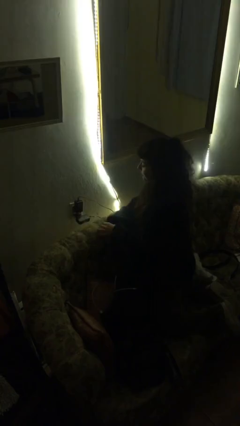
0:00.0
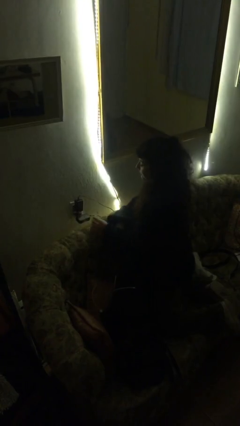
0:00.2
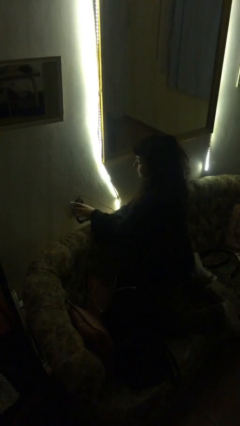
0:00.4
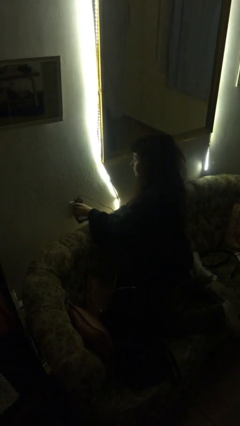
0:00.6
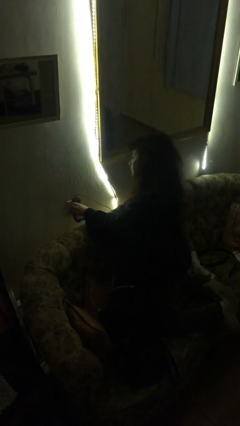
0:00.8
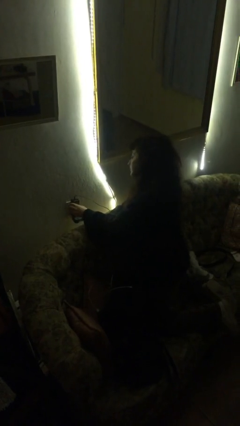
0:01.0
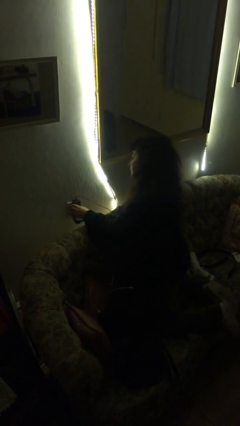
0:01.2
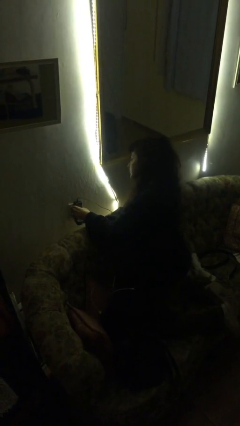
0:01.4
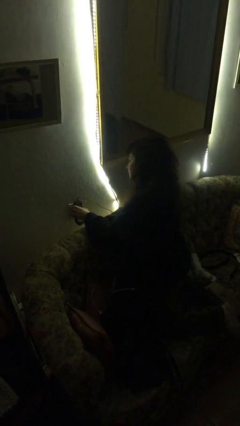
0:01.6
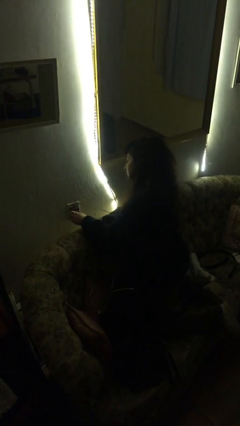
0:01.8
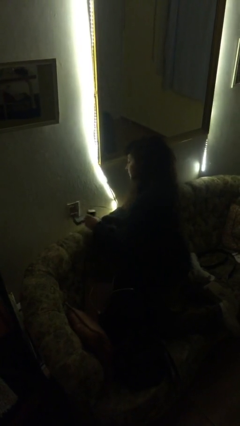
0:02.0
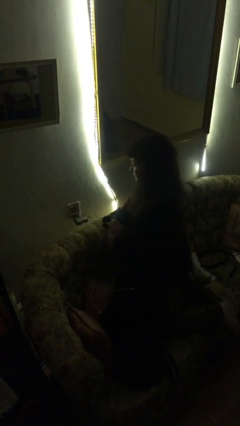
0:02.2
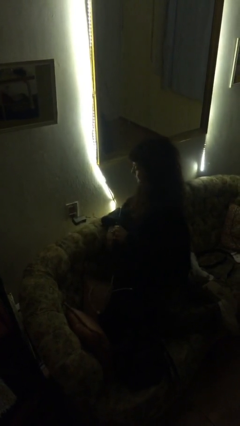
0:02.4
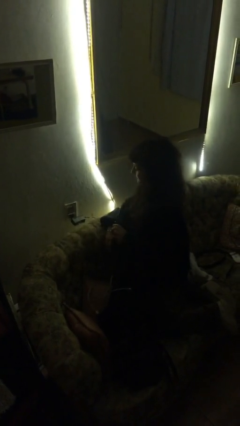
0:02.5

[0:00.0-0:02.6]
person unplugs from electrical socket

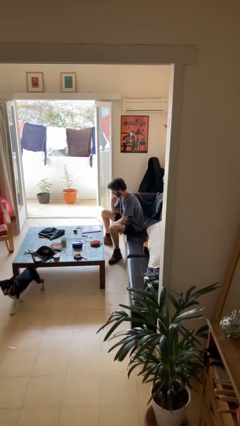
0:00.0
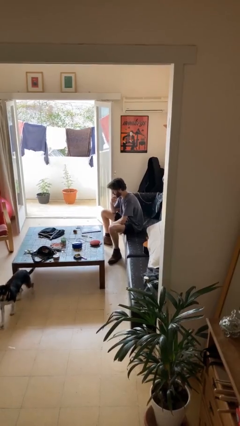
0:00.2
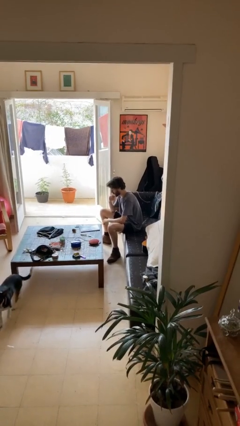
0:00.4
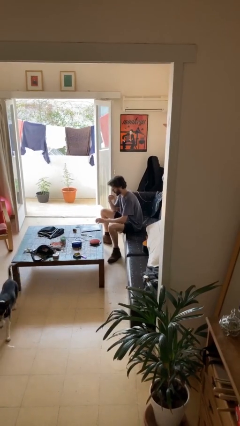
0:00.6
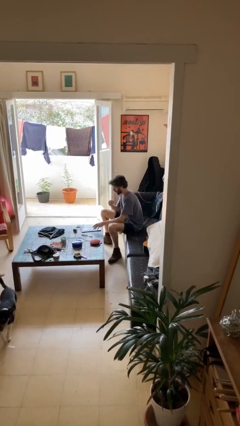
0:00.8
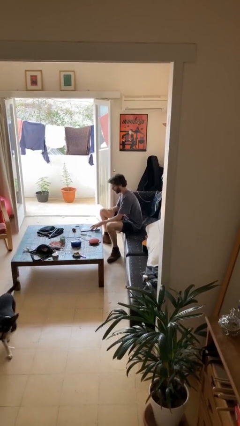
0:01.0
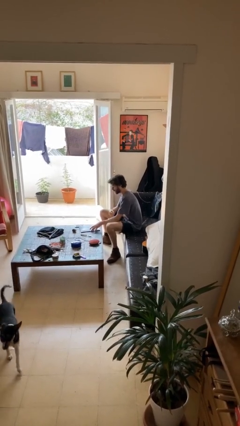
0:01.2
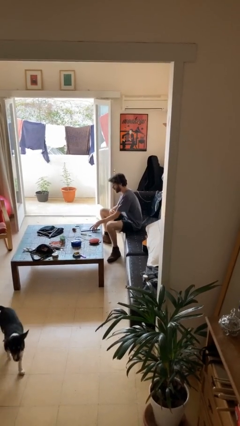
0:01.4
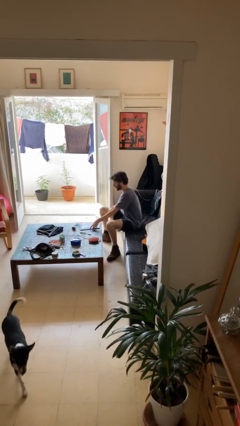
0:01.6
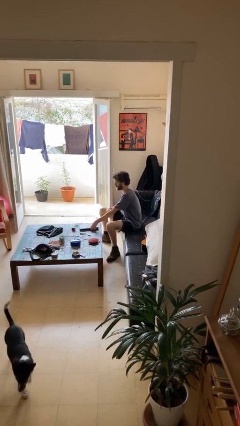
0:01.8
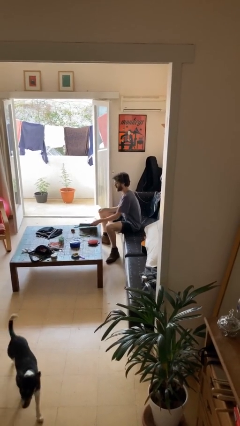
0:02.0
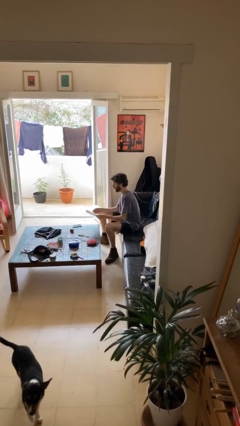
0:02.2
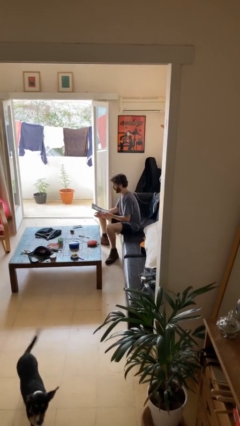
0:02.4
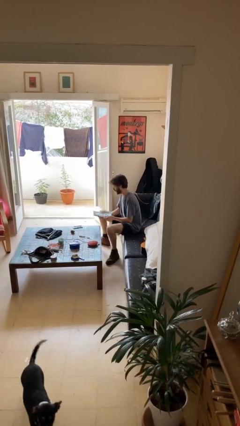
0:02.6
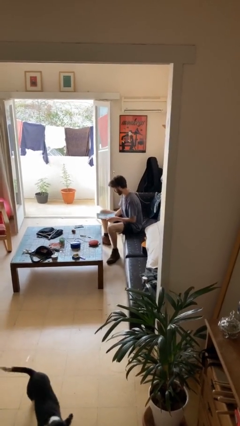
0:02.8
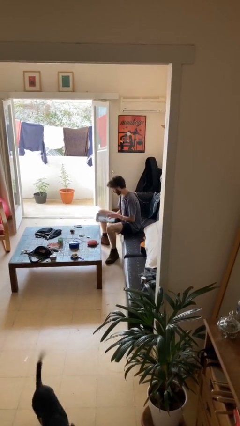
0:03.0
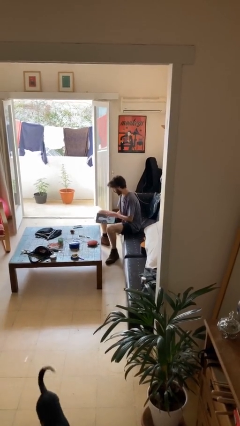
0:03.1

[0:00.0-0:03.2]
person picks up object from table

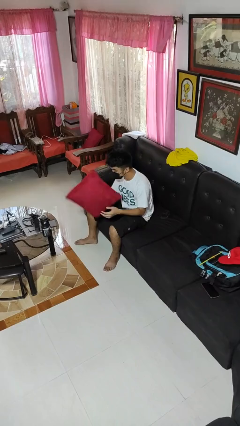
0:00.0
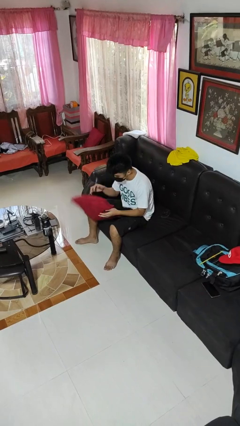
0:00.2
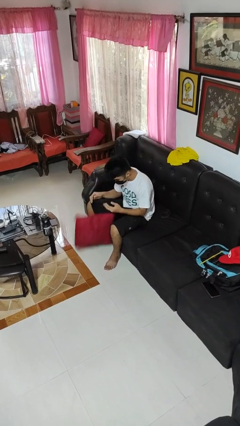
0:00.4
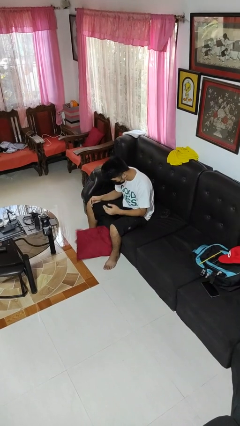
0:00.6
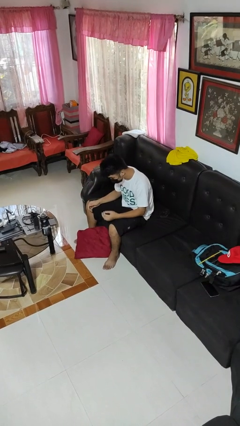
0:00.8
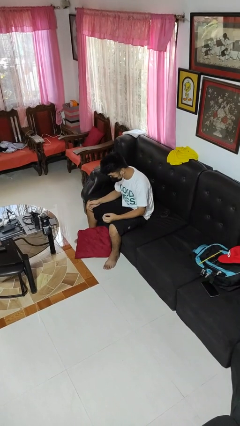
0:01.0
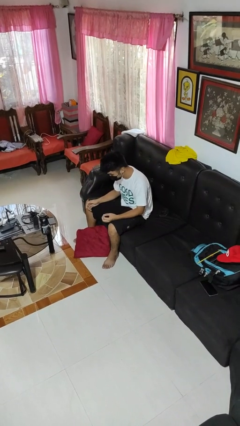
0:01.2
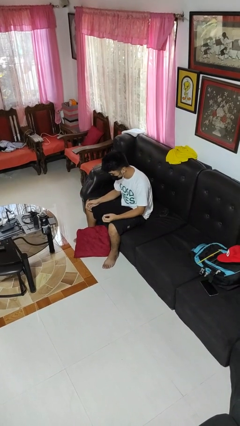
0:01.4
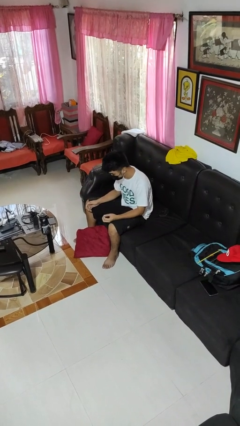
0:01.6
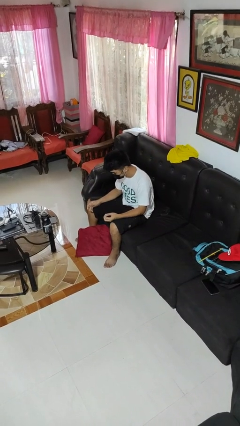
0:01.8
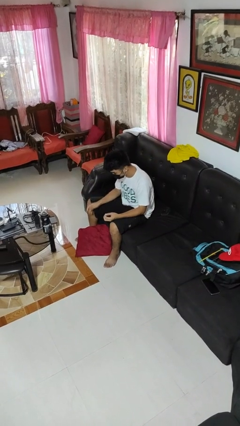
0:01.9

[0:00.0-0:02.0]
person drops object

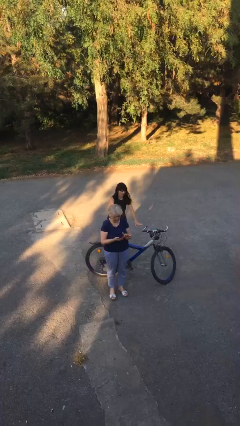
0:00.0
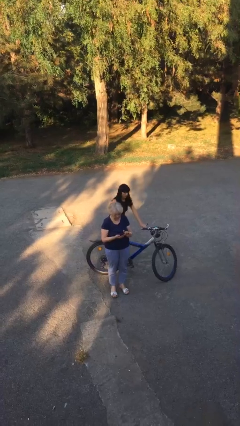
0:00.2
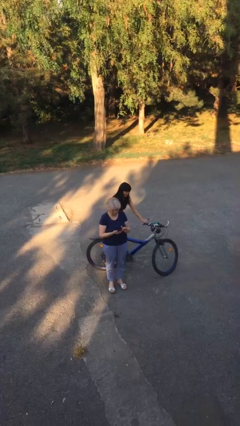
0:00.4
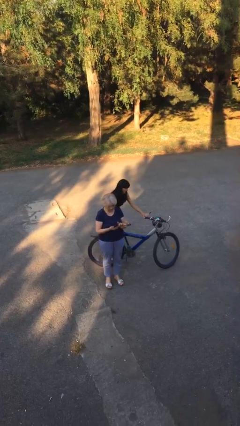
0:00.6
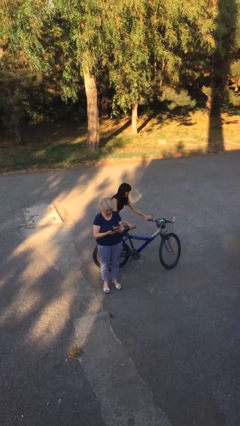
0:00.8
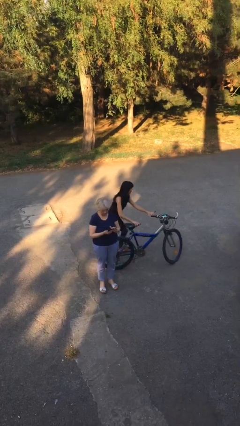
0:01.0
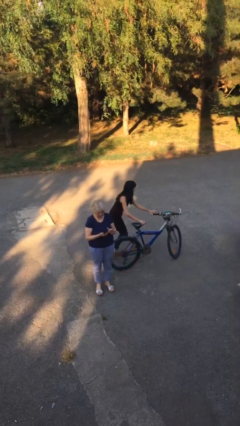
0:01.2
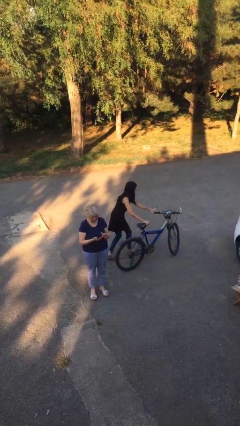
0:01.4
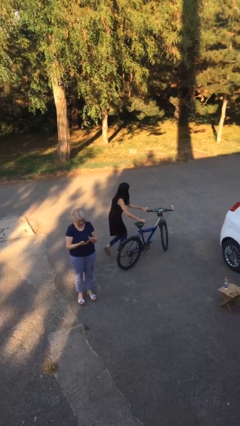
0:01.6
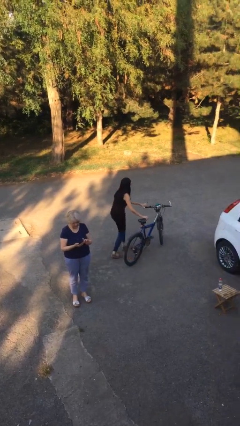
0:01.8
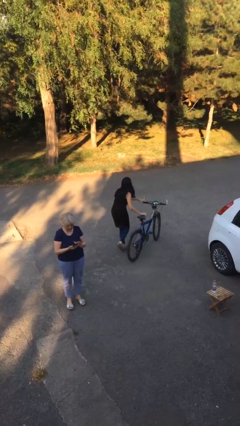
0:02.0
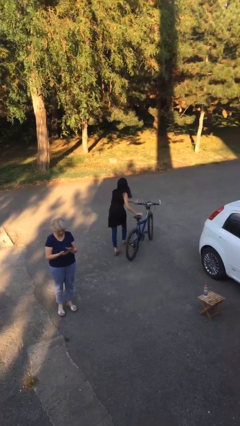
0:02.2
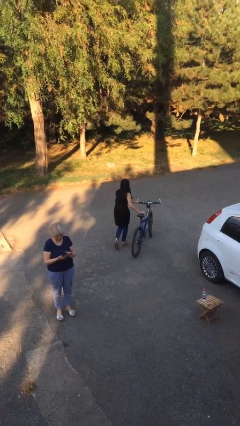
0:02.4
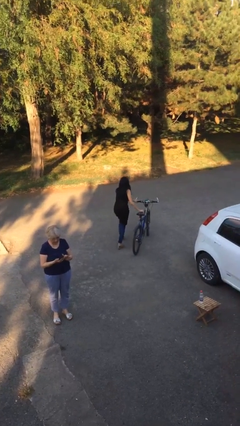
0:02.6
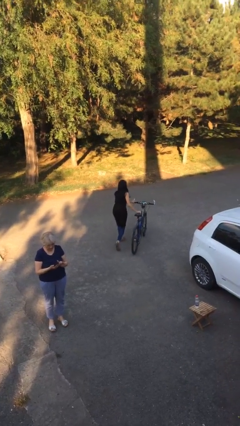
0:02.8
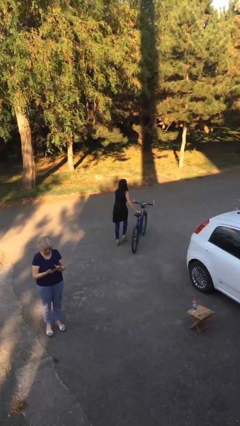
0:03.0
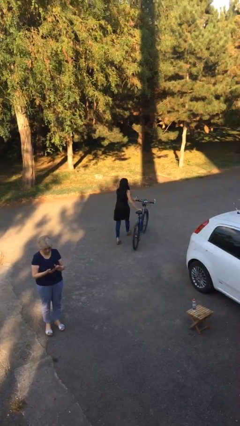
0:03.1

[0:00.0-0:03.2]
person steals object from person

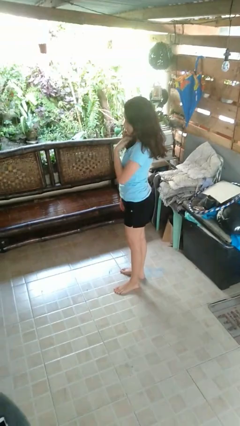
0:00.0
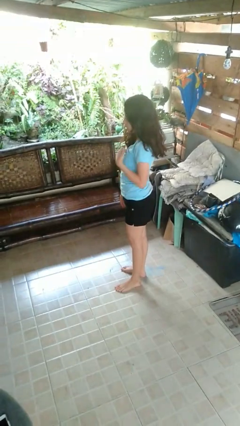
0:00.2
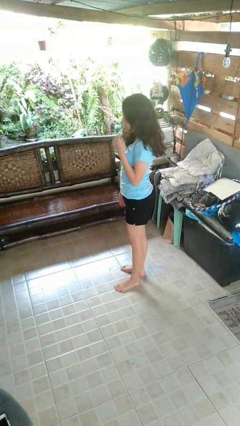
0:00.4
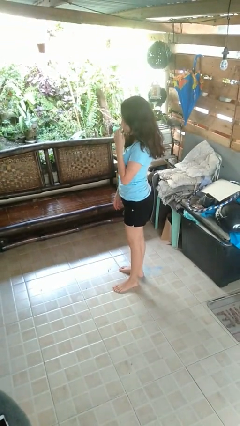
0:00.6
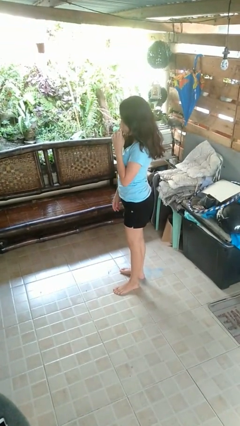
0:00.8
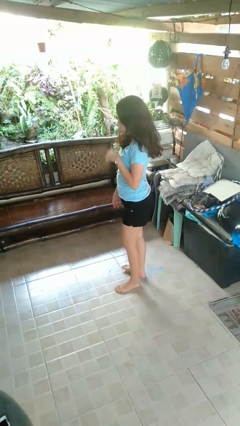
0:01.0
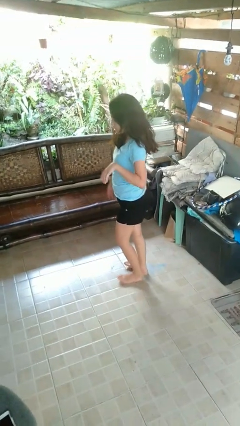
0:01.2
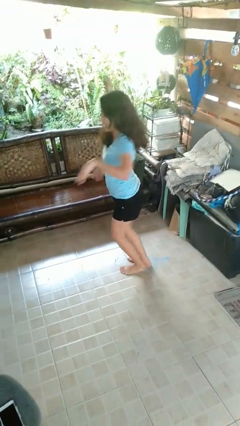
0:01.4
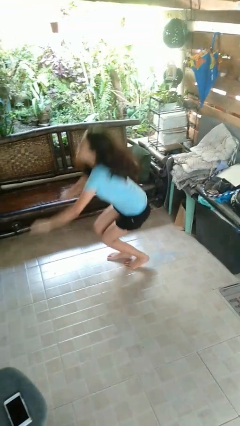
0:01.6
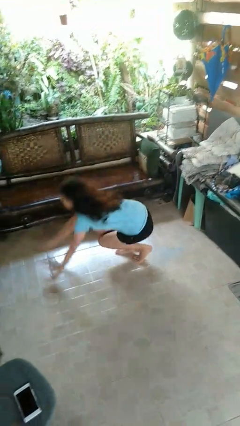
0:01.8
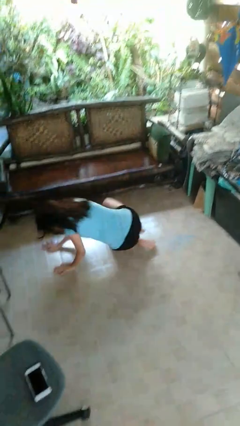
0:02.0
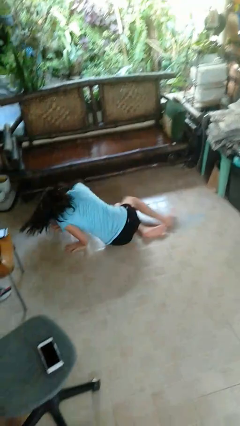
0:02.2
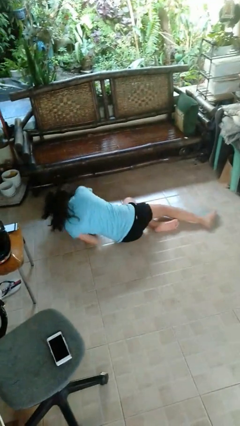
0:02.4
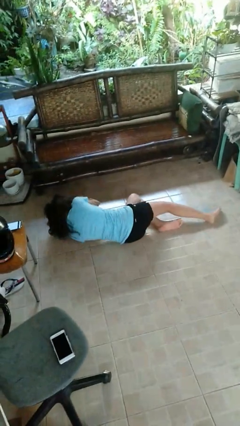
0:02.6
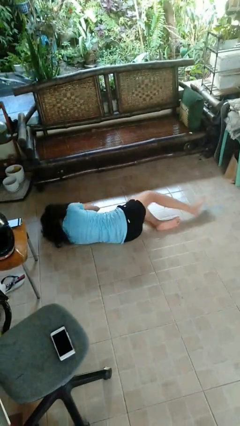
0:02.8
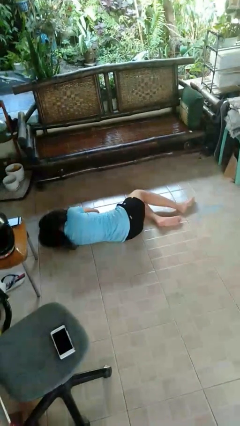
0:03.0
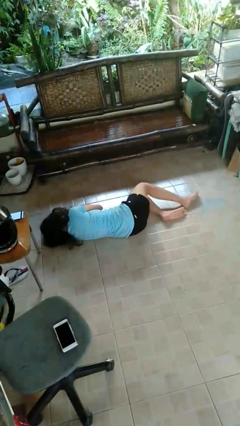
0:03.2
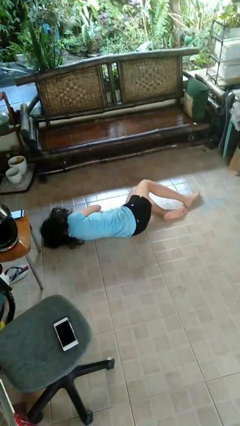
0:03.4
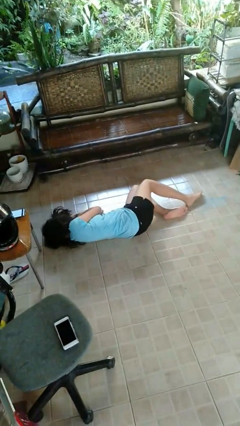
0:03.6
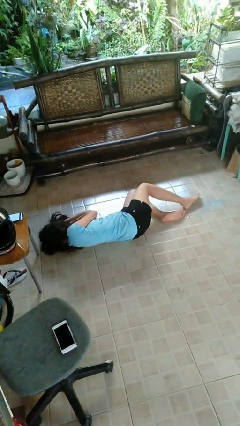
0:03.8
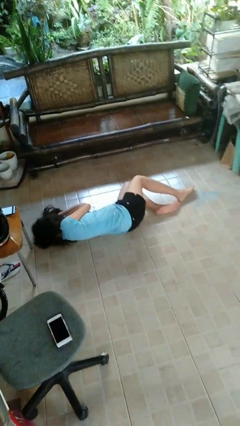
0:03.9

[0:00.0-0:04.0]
person falls while standing

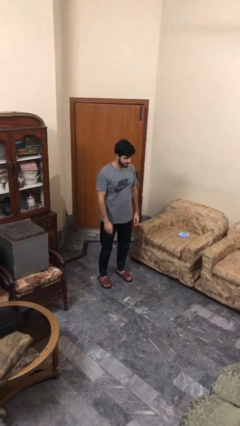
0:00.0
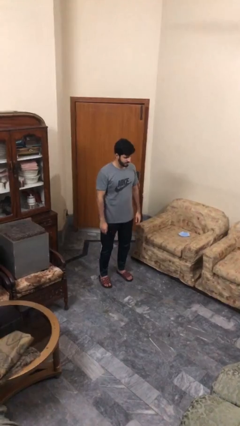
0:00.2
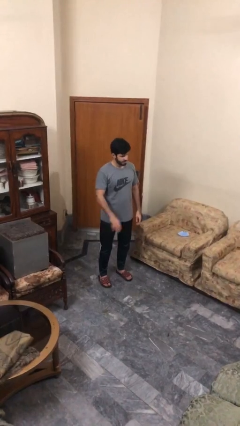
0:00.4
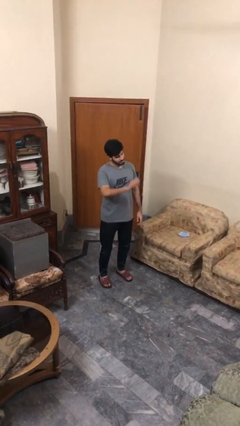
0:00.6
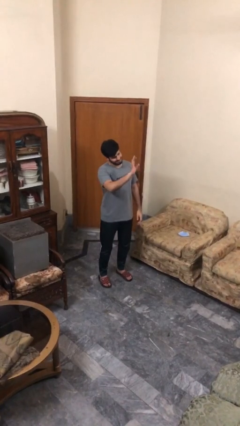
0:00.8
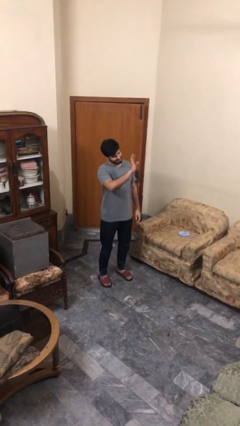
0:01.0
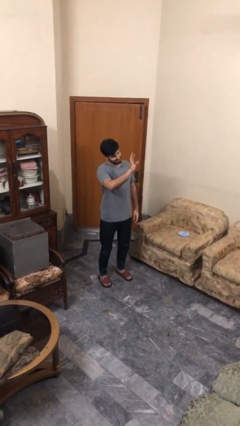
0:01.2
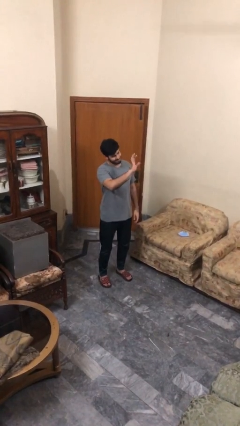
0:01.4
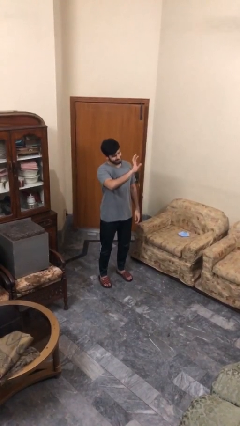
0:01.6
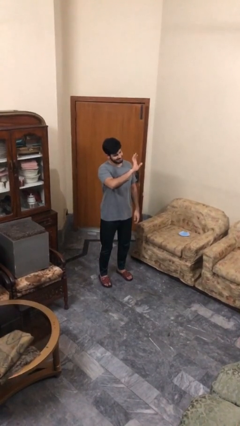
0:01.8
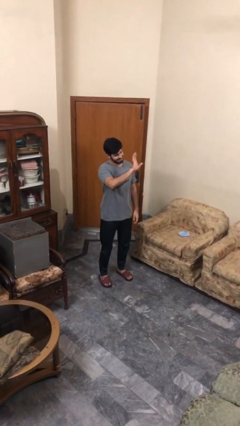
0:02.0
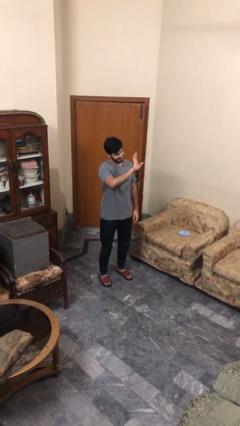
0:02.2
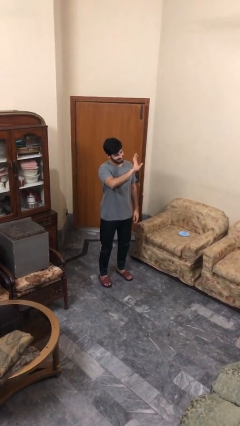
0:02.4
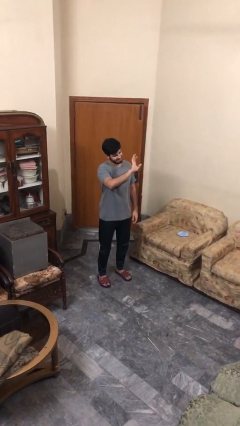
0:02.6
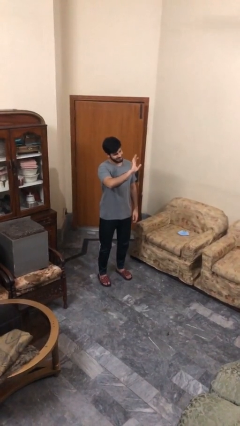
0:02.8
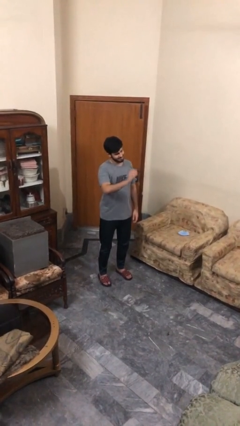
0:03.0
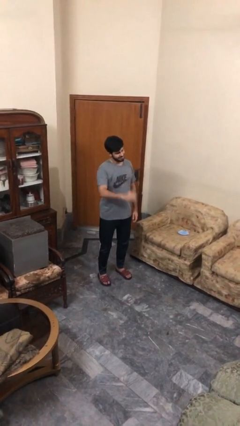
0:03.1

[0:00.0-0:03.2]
person waves at person
